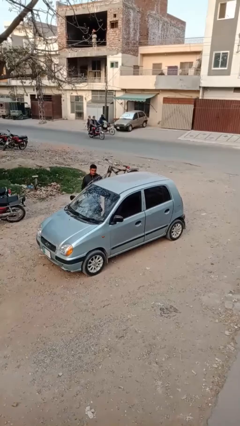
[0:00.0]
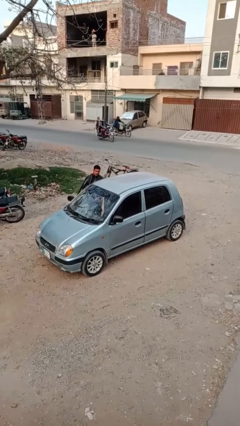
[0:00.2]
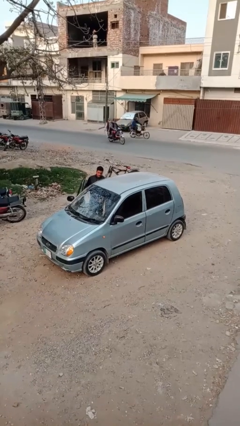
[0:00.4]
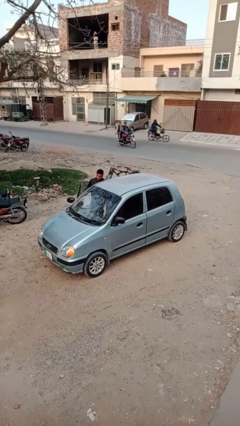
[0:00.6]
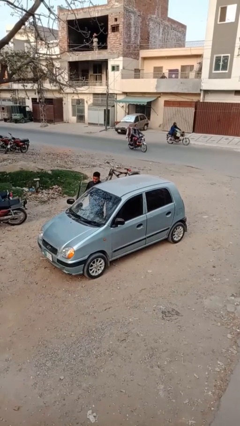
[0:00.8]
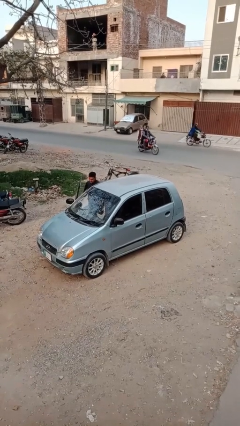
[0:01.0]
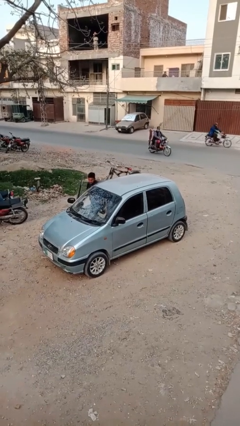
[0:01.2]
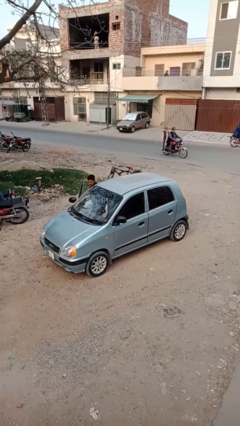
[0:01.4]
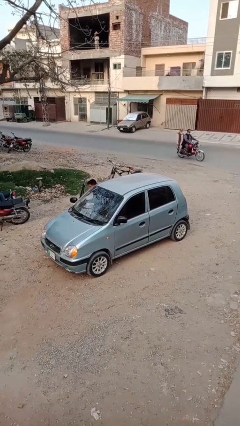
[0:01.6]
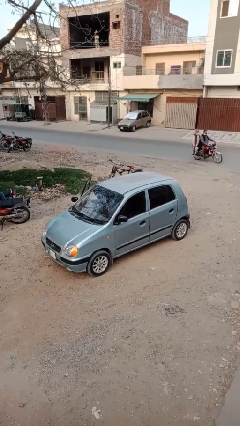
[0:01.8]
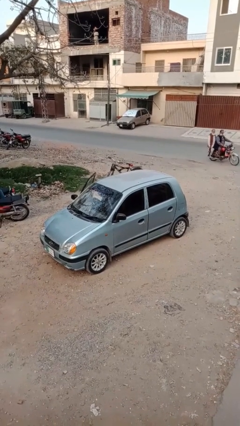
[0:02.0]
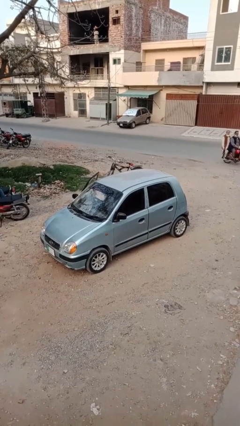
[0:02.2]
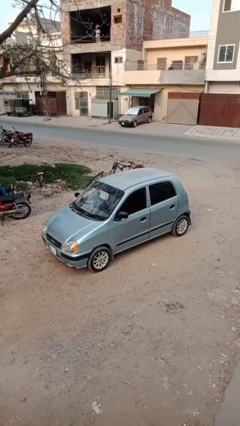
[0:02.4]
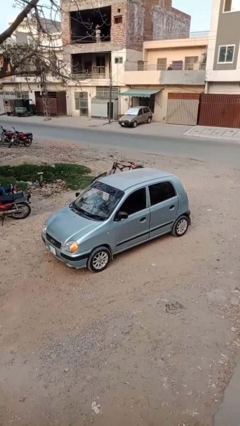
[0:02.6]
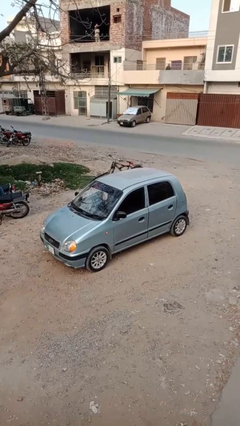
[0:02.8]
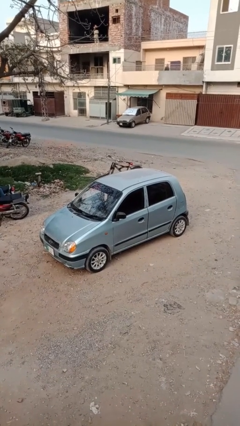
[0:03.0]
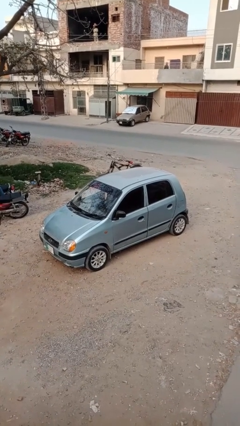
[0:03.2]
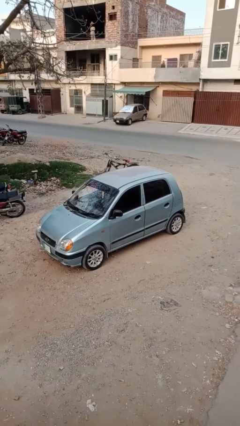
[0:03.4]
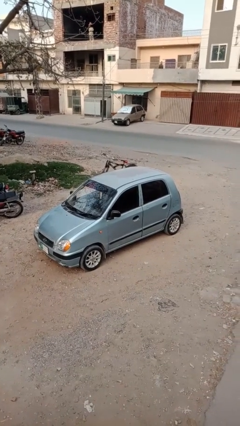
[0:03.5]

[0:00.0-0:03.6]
car picks up person

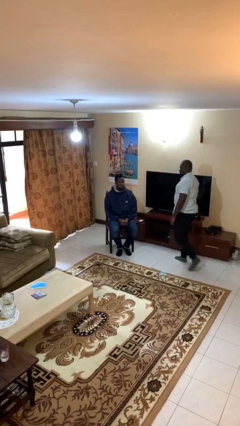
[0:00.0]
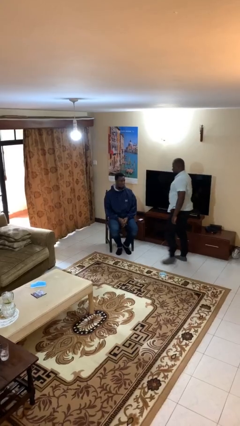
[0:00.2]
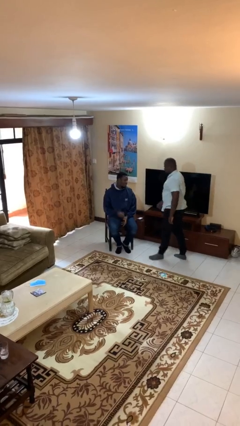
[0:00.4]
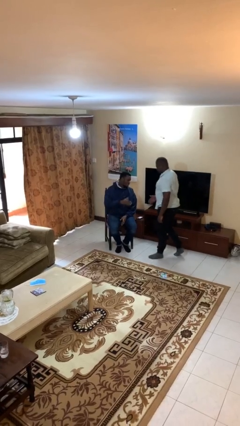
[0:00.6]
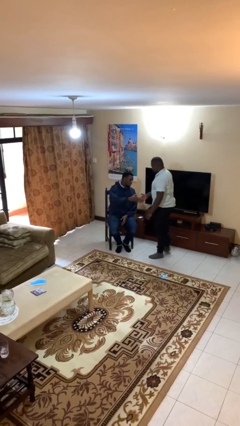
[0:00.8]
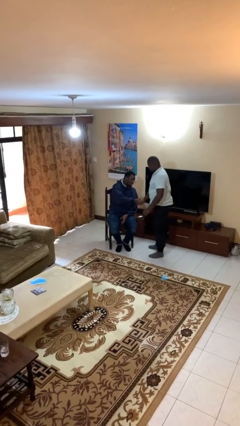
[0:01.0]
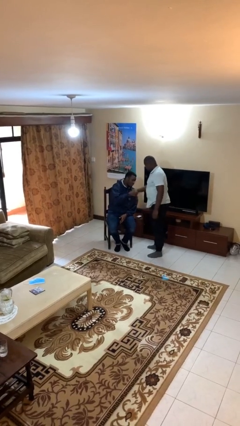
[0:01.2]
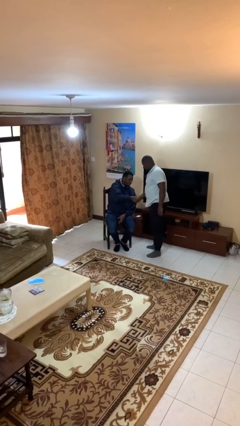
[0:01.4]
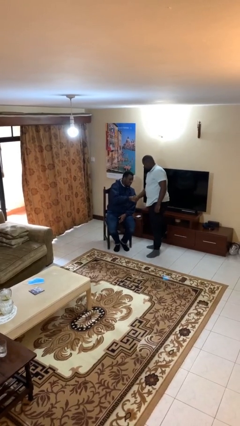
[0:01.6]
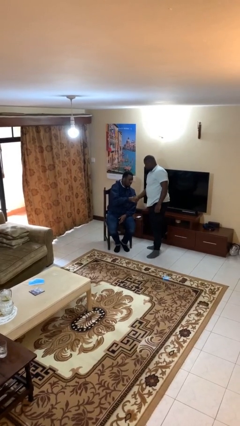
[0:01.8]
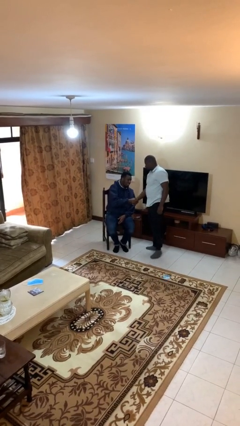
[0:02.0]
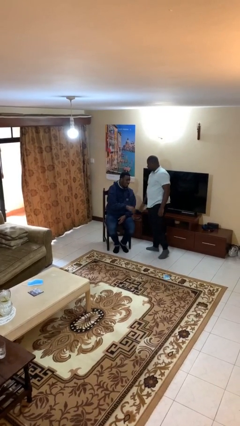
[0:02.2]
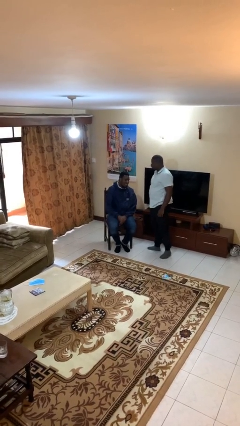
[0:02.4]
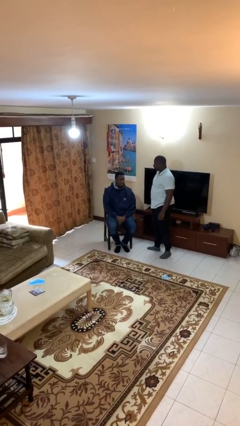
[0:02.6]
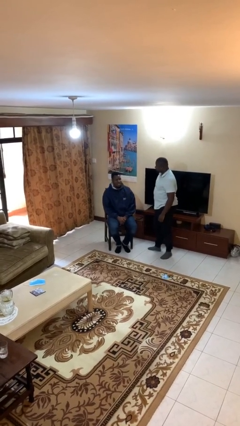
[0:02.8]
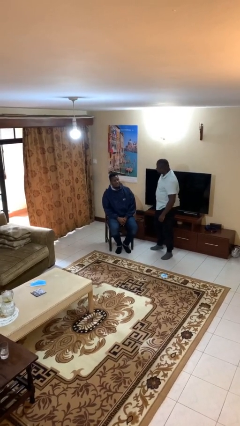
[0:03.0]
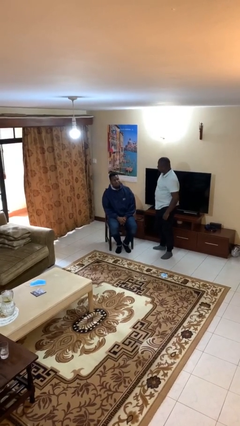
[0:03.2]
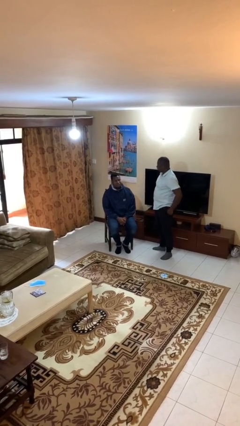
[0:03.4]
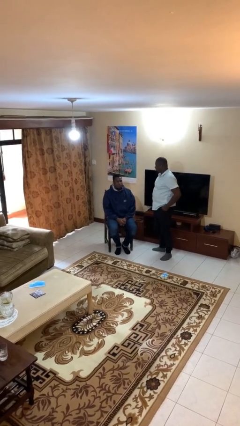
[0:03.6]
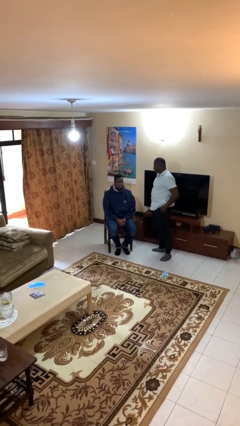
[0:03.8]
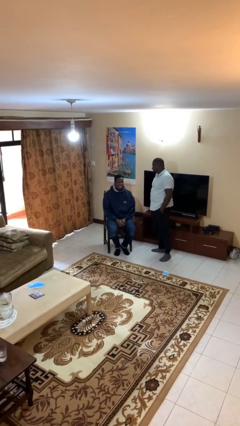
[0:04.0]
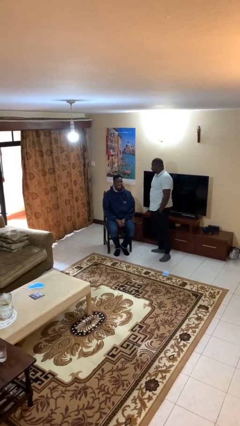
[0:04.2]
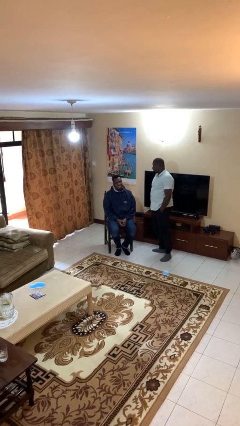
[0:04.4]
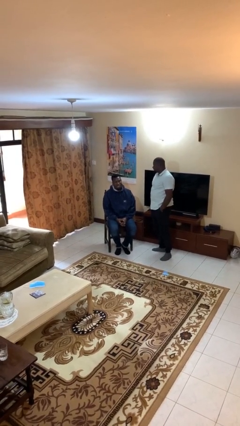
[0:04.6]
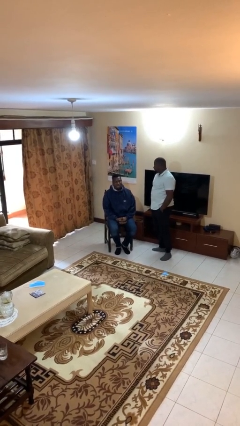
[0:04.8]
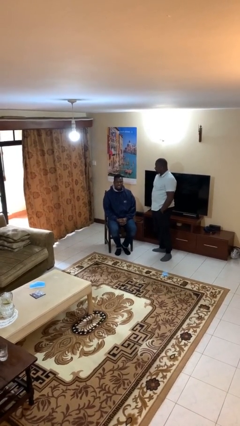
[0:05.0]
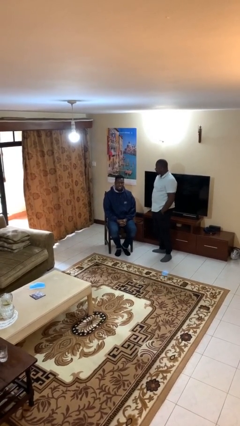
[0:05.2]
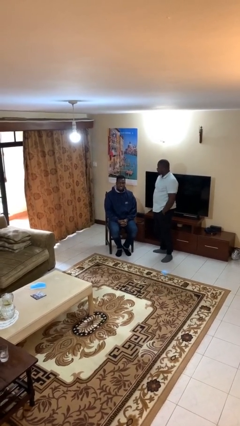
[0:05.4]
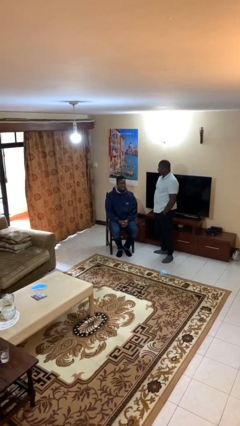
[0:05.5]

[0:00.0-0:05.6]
person shakes hand

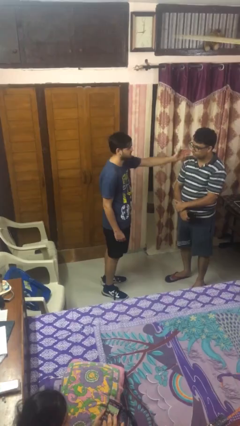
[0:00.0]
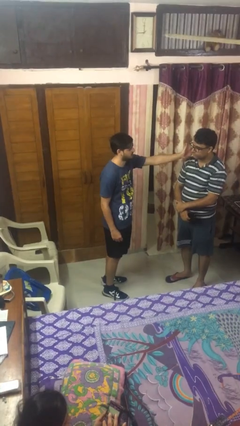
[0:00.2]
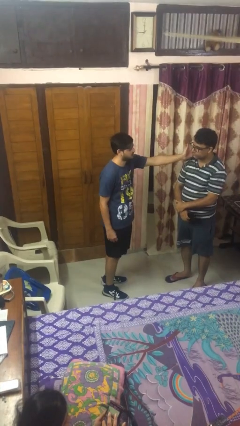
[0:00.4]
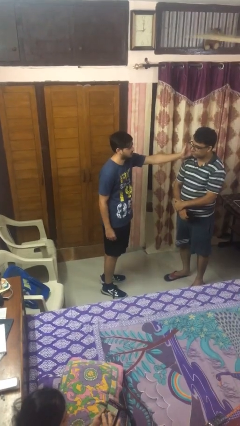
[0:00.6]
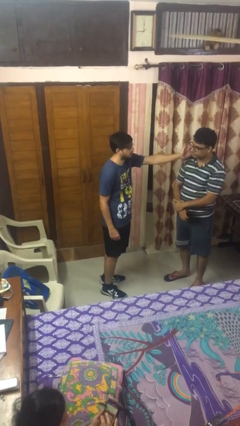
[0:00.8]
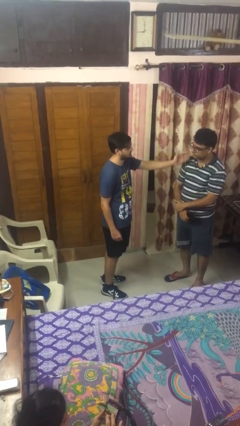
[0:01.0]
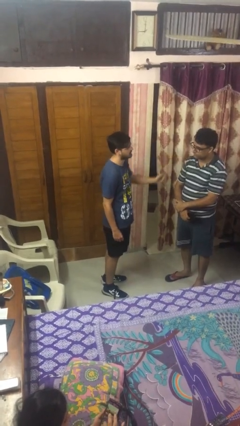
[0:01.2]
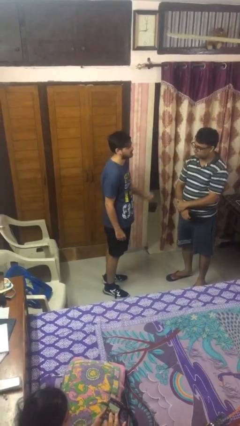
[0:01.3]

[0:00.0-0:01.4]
person touches face of person

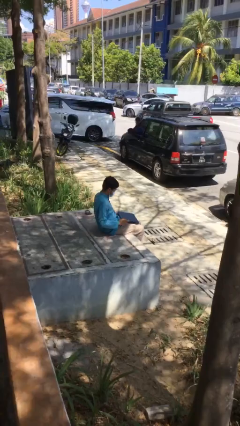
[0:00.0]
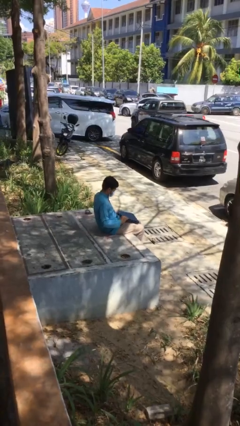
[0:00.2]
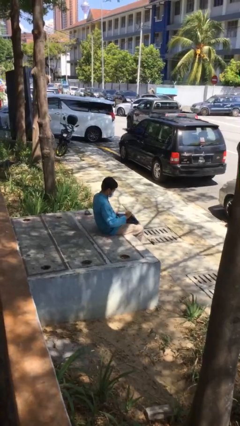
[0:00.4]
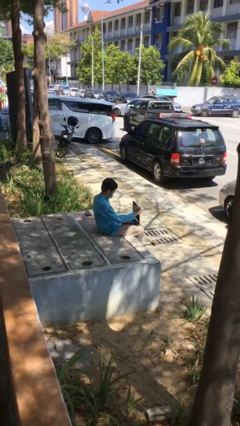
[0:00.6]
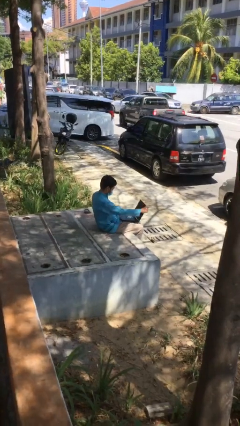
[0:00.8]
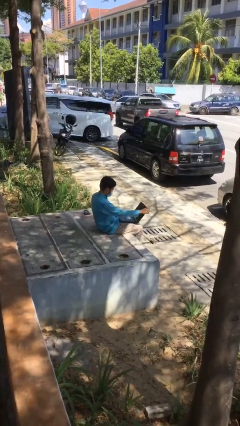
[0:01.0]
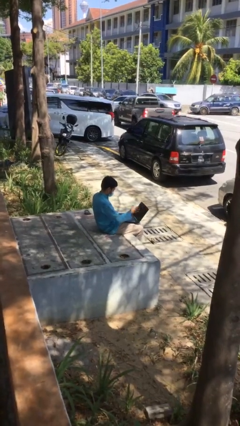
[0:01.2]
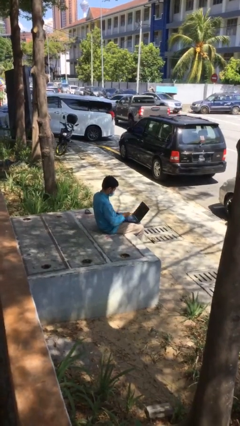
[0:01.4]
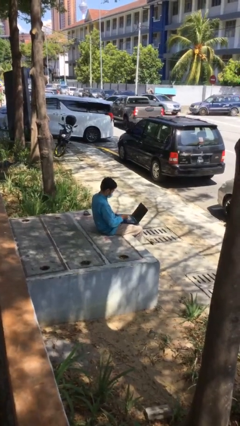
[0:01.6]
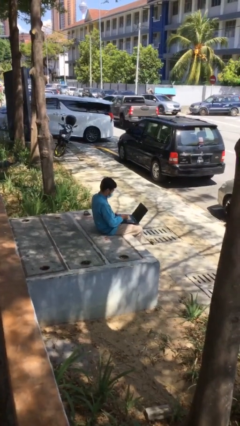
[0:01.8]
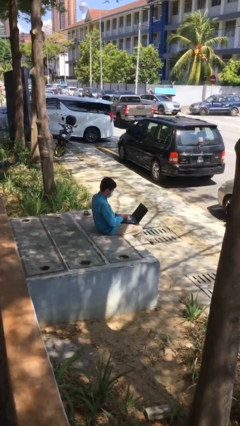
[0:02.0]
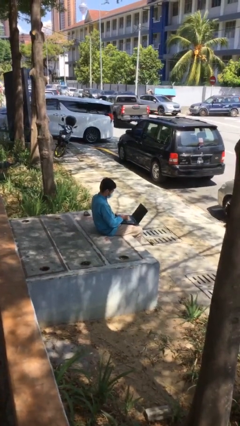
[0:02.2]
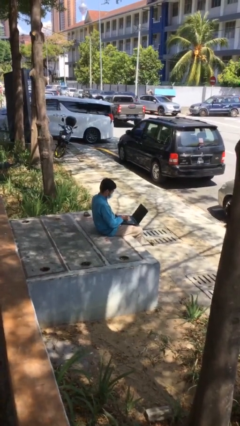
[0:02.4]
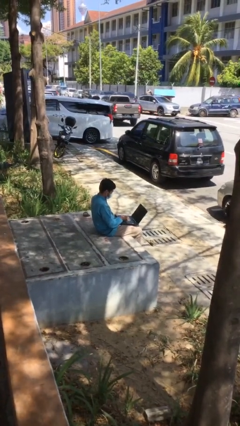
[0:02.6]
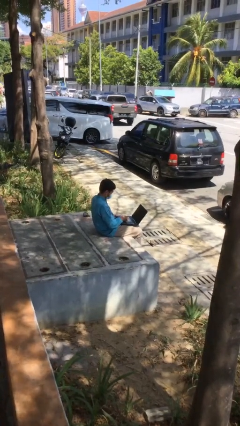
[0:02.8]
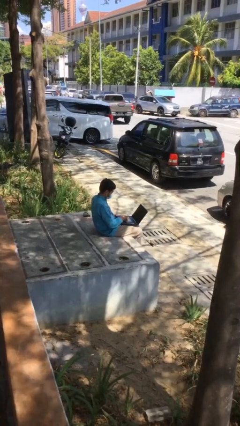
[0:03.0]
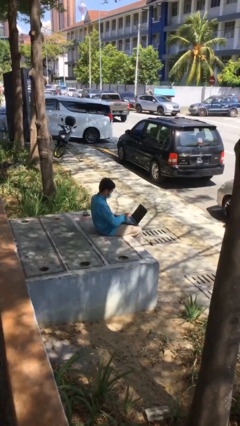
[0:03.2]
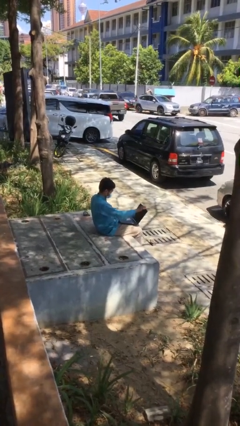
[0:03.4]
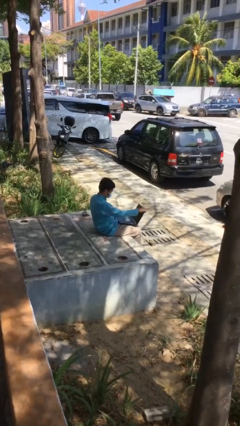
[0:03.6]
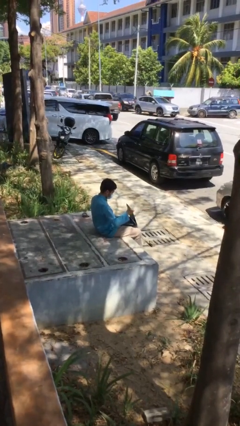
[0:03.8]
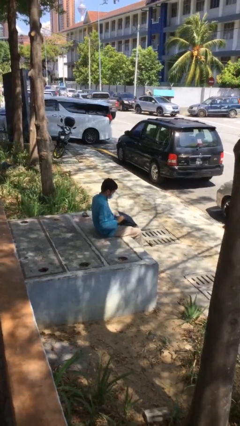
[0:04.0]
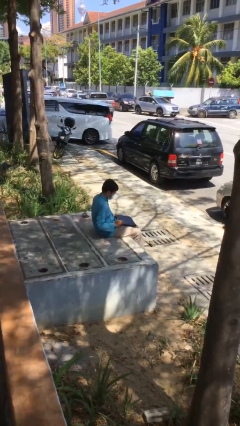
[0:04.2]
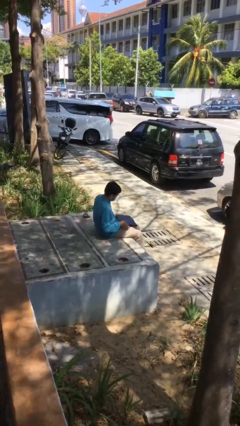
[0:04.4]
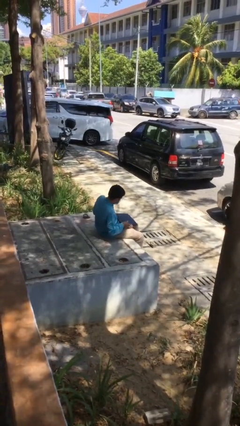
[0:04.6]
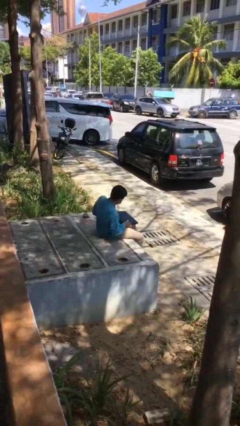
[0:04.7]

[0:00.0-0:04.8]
person interacts with laptop

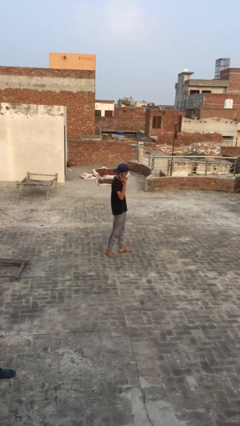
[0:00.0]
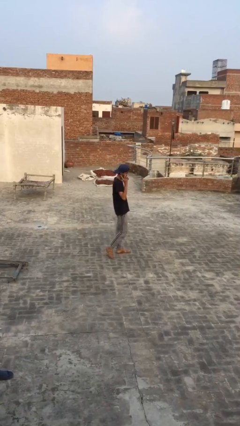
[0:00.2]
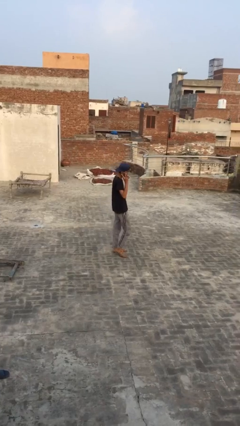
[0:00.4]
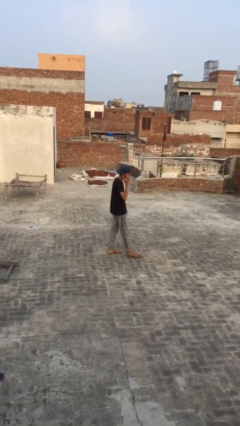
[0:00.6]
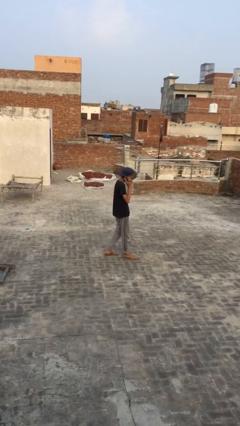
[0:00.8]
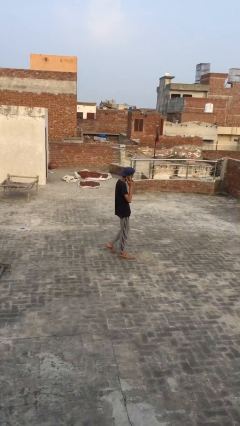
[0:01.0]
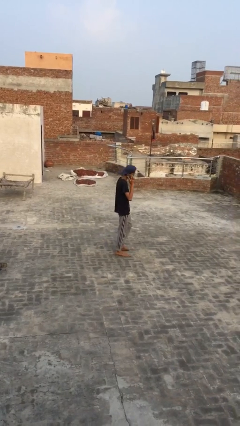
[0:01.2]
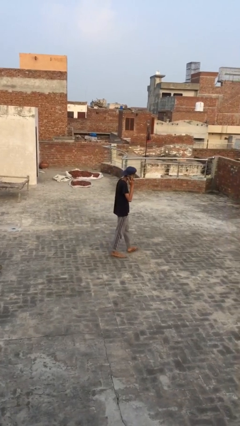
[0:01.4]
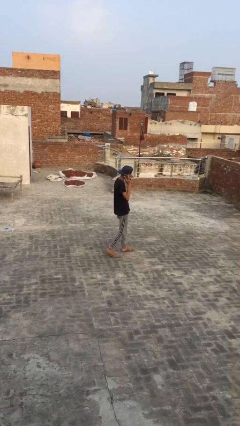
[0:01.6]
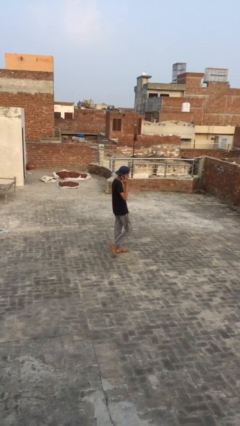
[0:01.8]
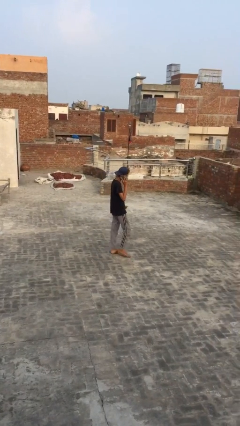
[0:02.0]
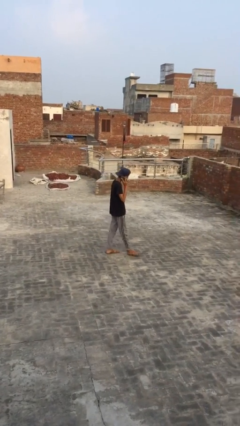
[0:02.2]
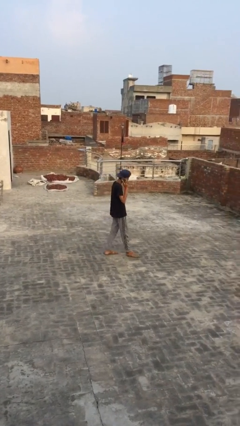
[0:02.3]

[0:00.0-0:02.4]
person talks on phone
